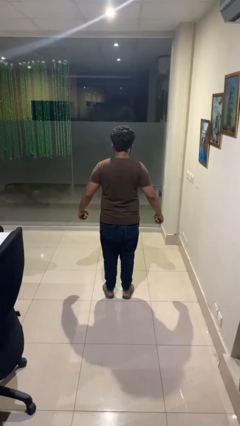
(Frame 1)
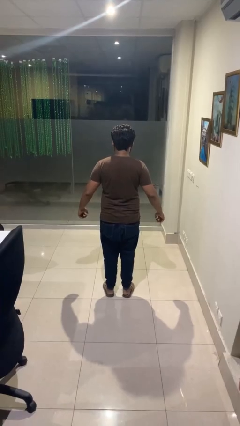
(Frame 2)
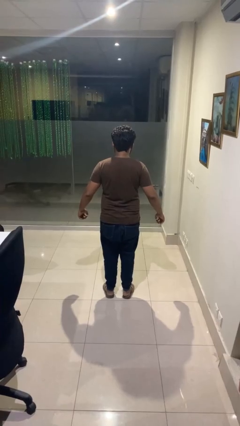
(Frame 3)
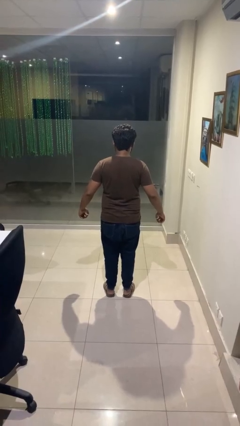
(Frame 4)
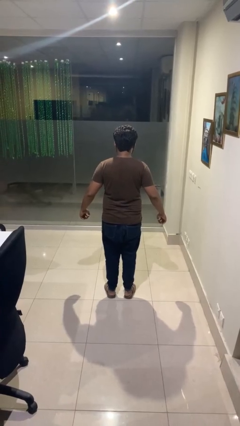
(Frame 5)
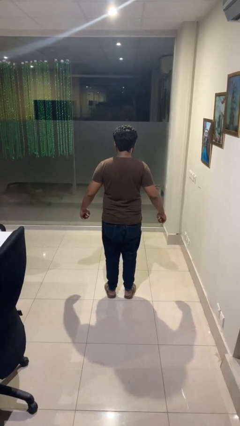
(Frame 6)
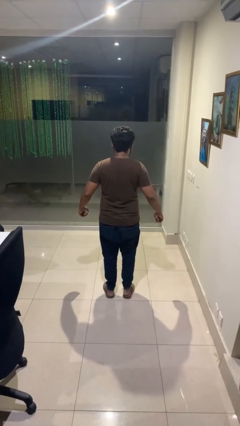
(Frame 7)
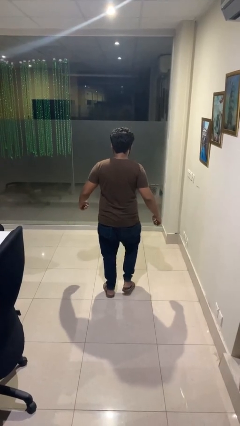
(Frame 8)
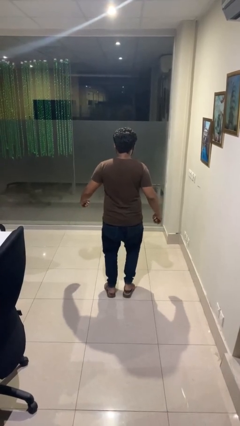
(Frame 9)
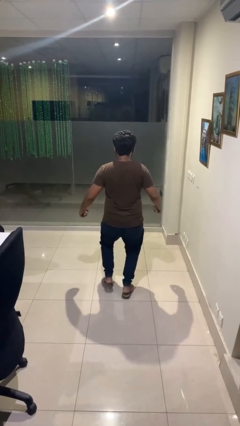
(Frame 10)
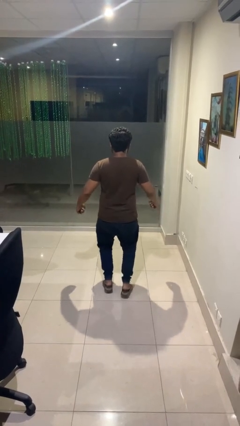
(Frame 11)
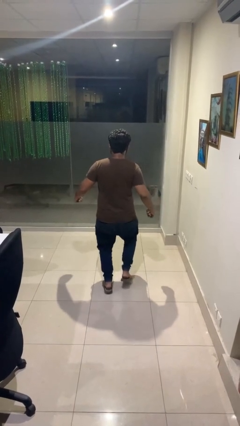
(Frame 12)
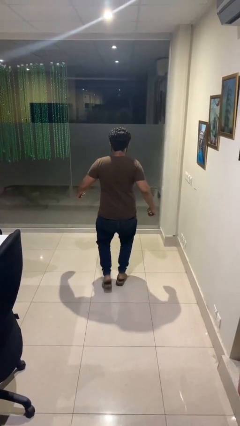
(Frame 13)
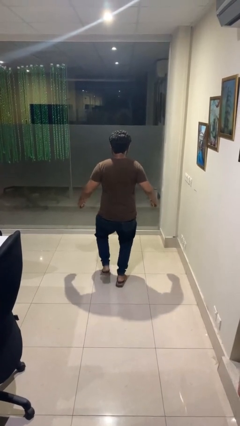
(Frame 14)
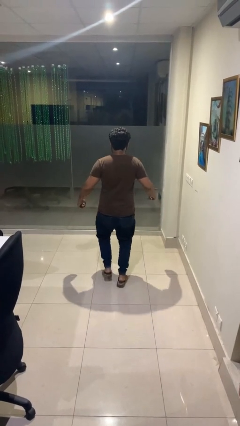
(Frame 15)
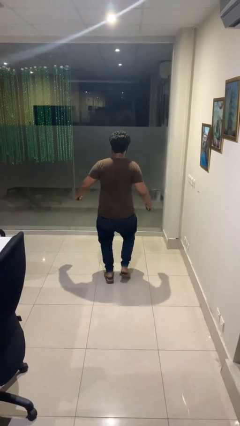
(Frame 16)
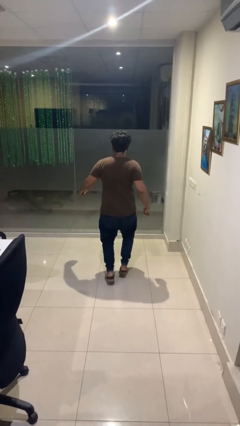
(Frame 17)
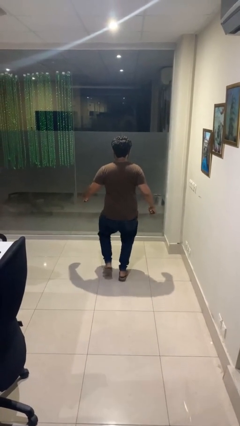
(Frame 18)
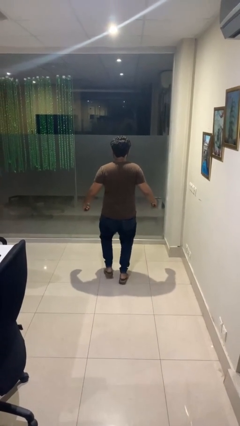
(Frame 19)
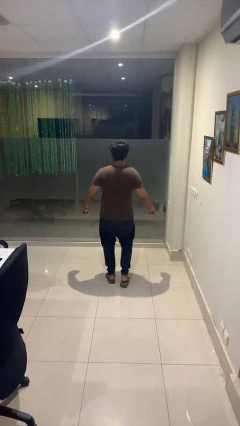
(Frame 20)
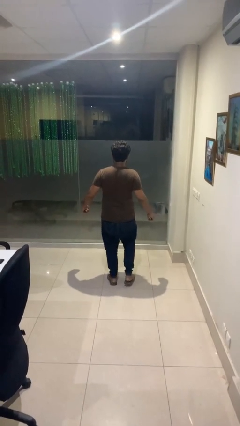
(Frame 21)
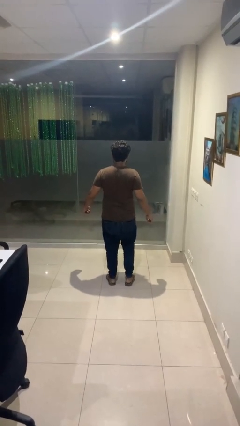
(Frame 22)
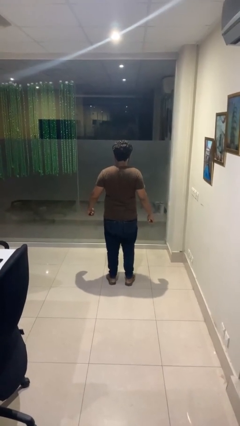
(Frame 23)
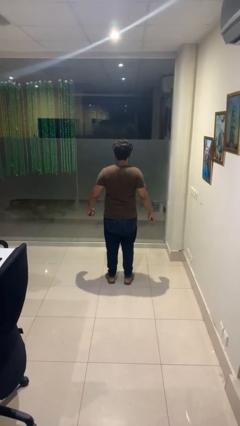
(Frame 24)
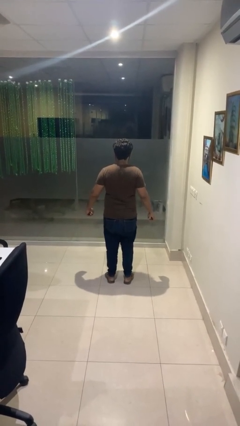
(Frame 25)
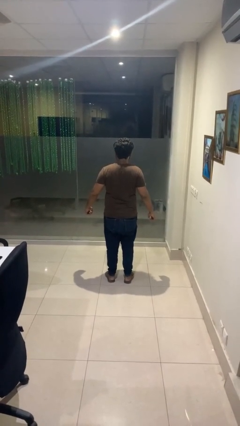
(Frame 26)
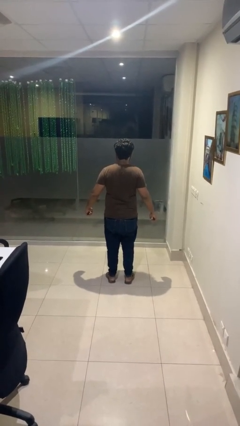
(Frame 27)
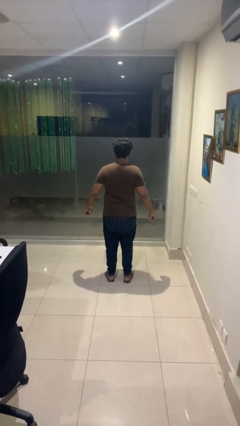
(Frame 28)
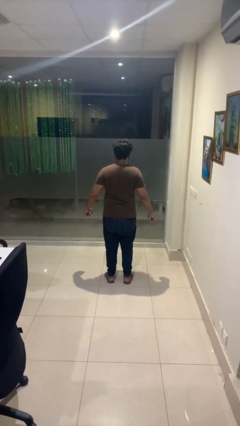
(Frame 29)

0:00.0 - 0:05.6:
person walks tiptoe

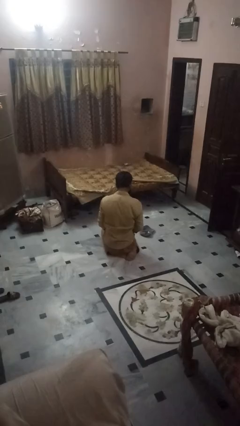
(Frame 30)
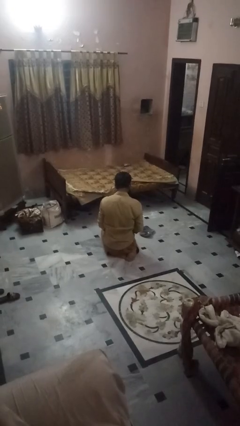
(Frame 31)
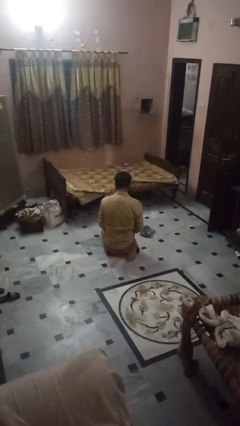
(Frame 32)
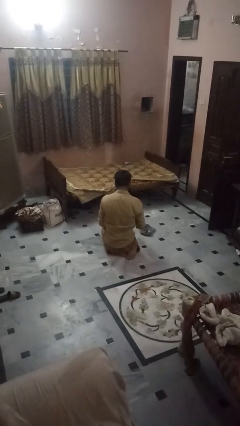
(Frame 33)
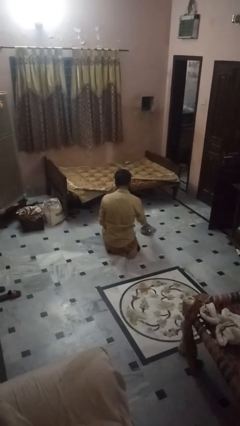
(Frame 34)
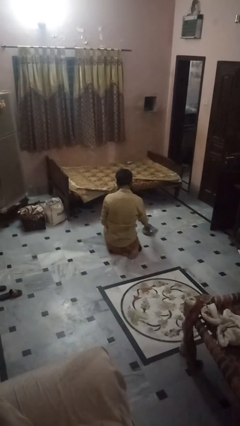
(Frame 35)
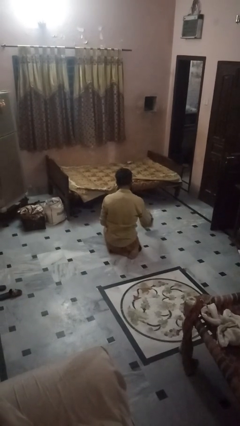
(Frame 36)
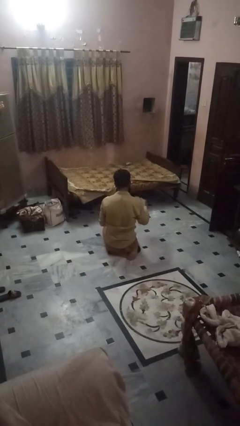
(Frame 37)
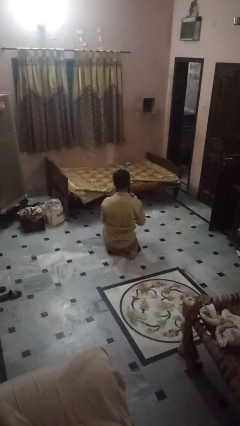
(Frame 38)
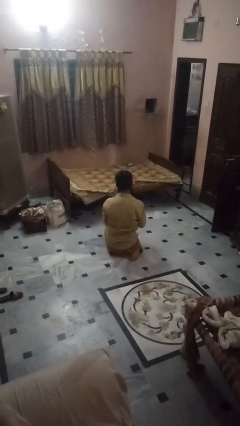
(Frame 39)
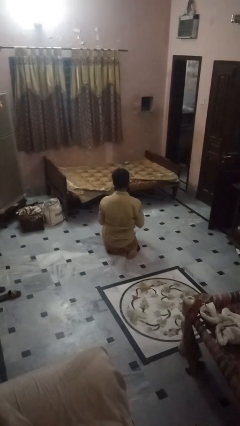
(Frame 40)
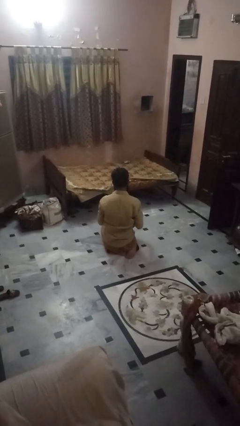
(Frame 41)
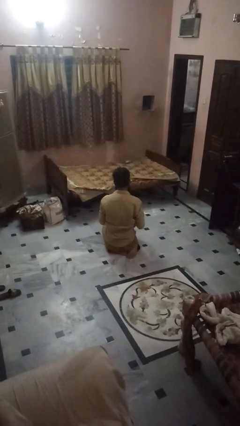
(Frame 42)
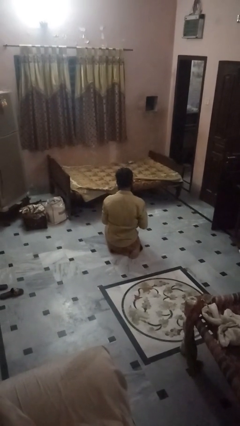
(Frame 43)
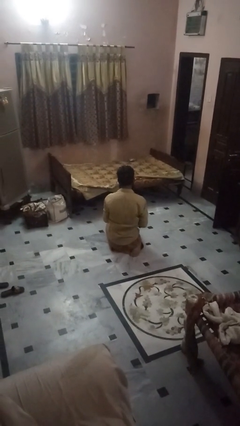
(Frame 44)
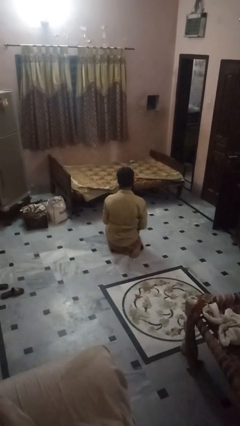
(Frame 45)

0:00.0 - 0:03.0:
person picks up object from floor

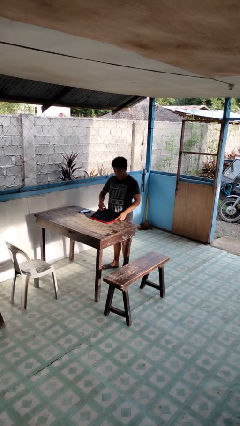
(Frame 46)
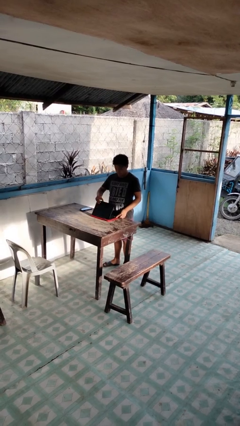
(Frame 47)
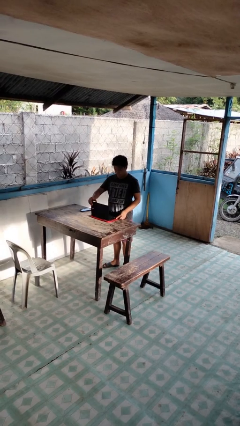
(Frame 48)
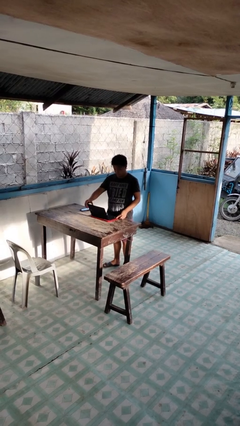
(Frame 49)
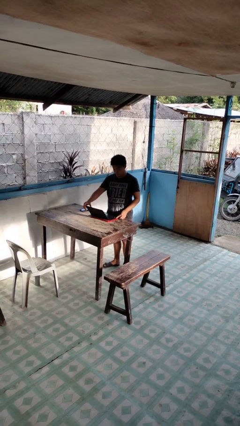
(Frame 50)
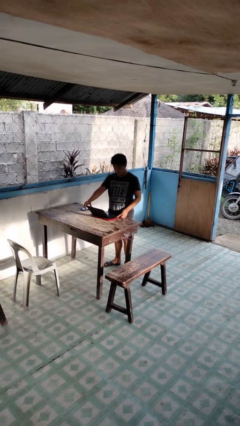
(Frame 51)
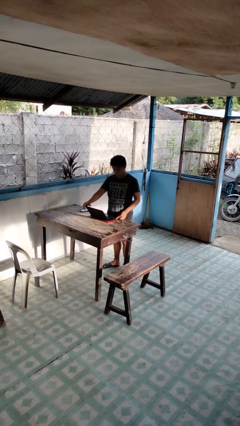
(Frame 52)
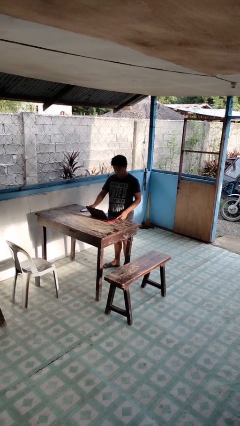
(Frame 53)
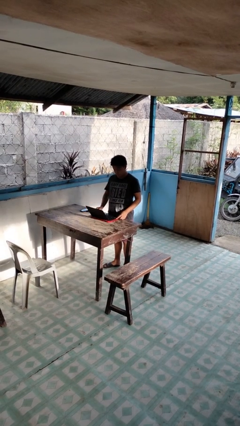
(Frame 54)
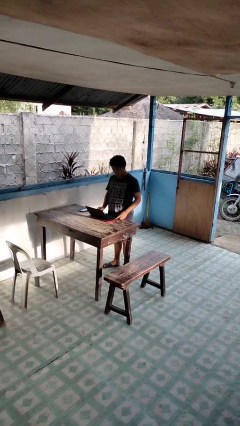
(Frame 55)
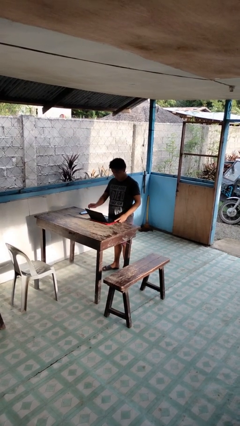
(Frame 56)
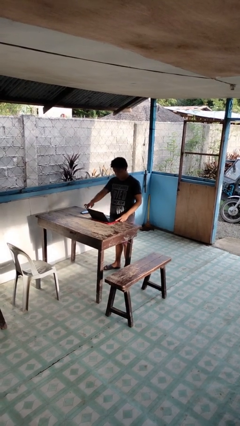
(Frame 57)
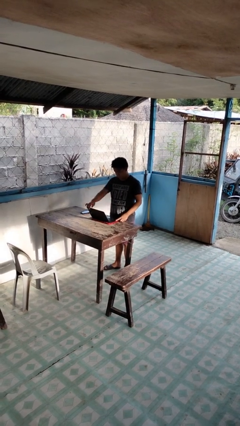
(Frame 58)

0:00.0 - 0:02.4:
person opens laptop

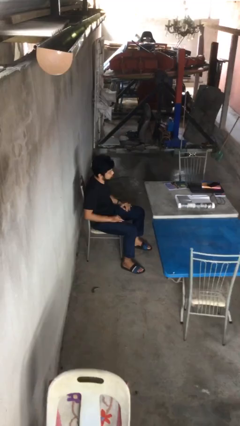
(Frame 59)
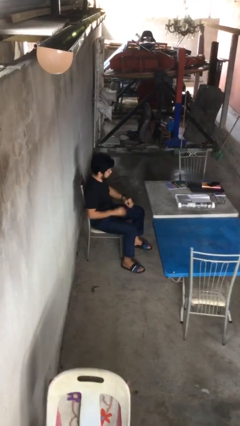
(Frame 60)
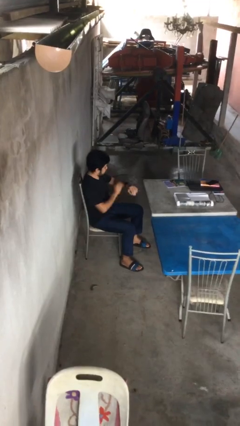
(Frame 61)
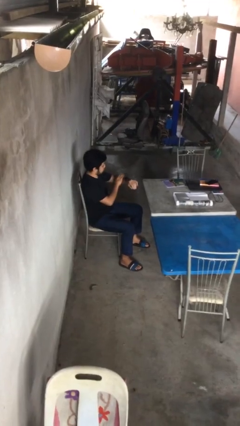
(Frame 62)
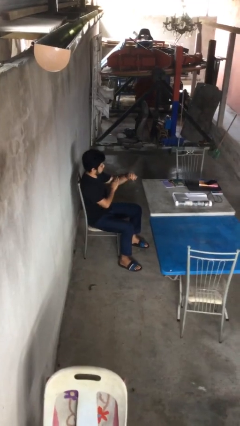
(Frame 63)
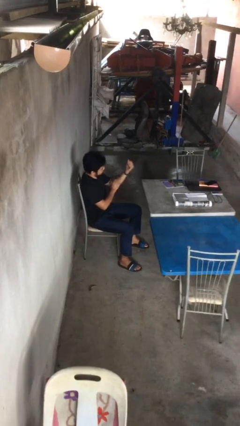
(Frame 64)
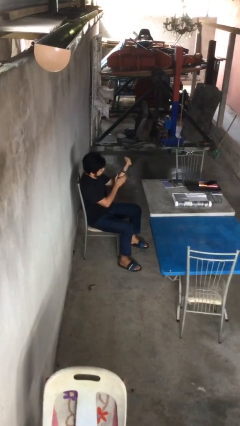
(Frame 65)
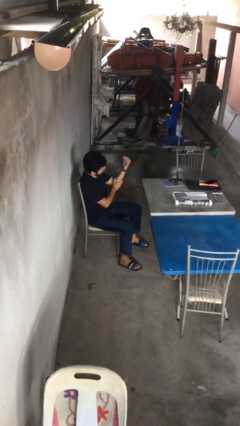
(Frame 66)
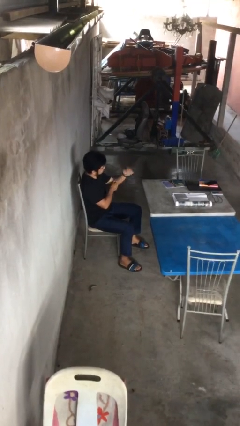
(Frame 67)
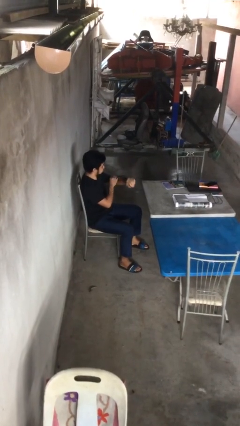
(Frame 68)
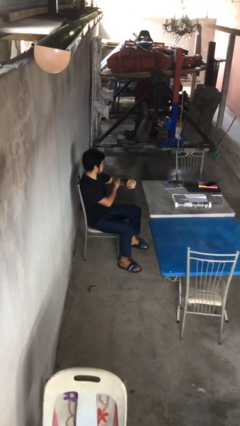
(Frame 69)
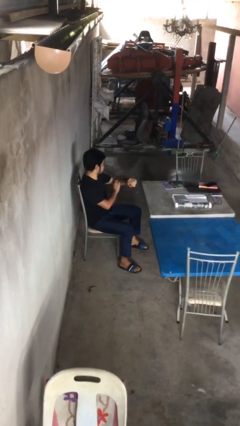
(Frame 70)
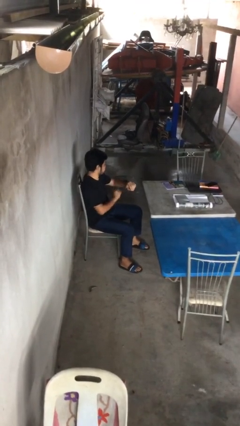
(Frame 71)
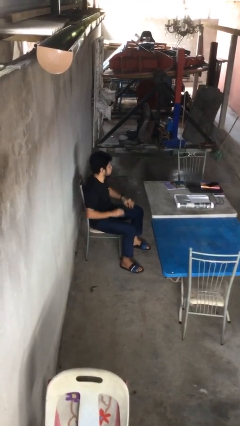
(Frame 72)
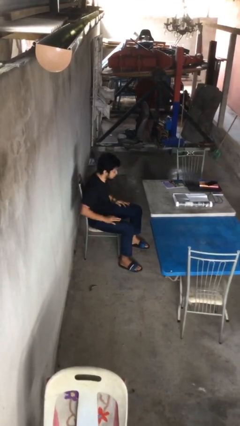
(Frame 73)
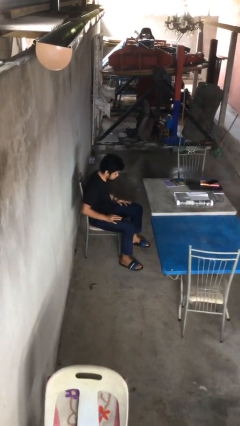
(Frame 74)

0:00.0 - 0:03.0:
person looks at hands in lap

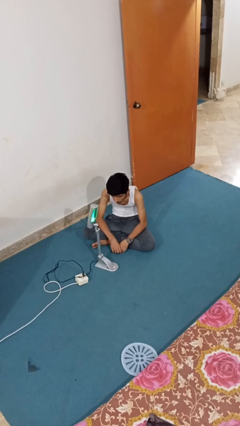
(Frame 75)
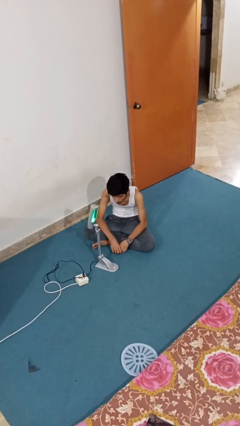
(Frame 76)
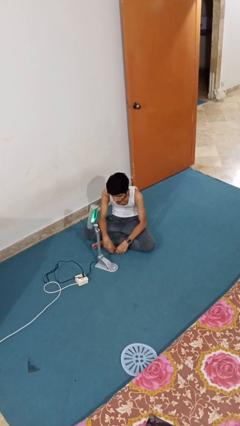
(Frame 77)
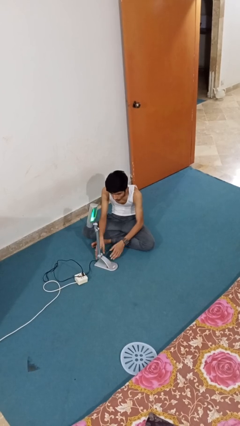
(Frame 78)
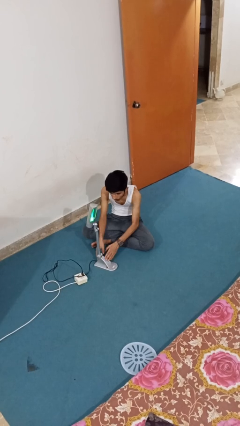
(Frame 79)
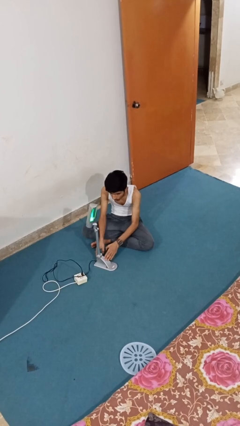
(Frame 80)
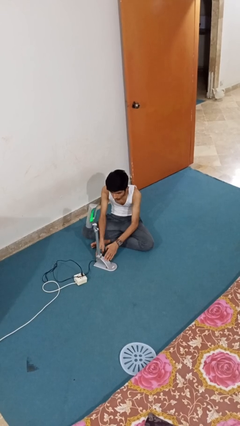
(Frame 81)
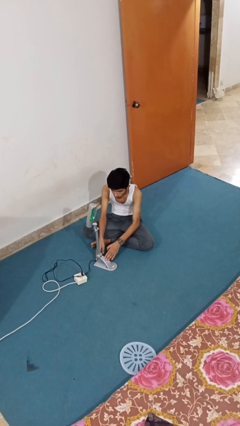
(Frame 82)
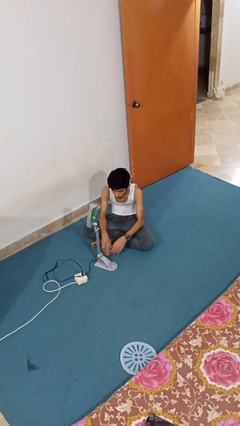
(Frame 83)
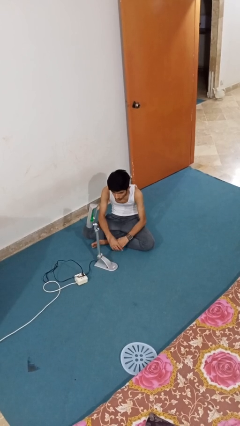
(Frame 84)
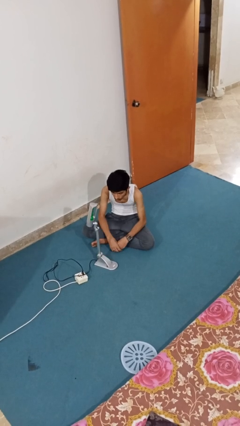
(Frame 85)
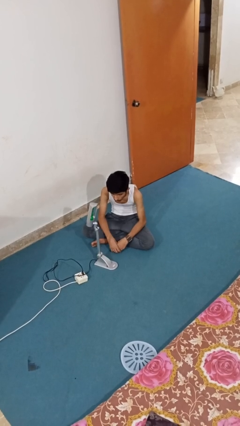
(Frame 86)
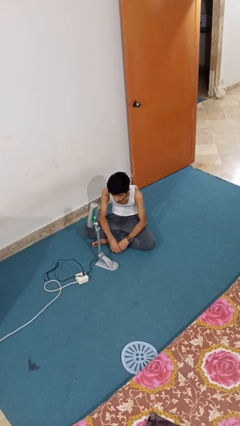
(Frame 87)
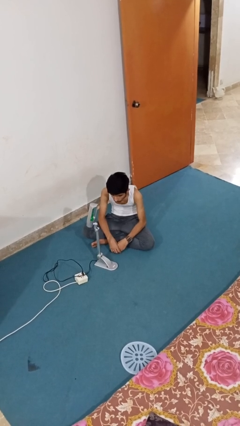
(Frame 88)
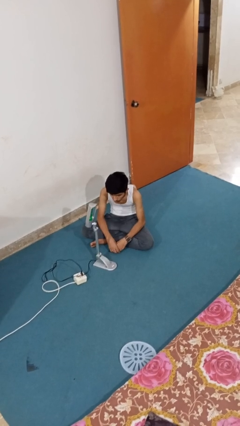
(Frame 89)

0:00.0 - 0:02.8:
person turns off lamp

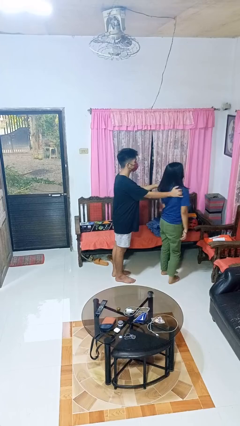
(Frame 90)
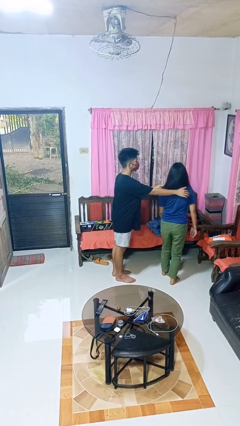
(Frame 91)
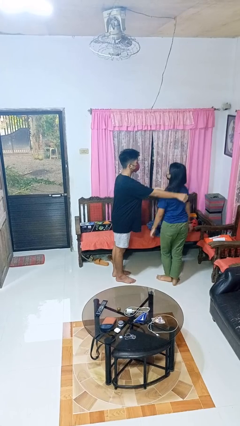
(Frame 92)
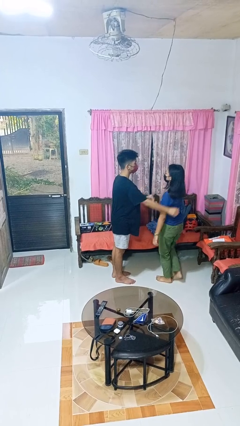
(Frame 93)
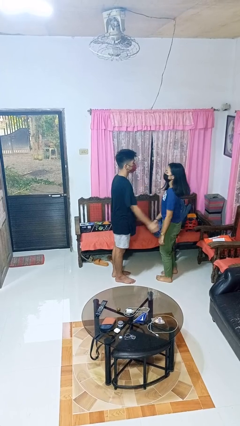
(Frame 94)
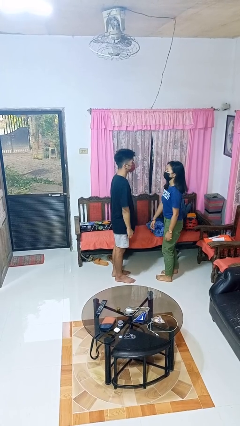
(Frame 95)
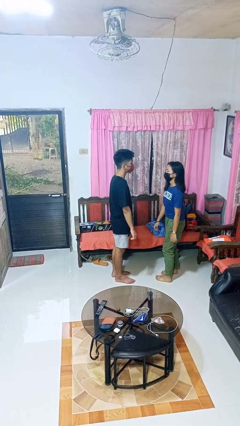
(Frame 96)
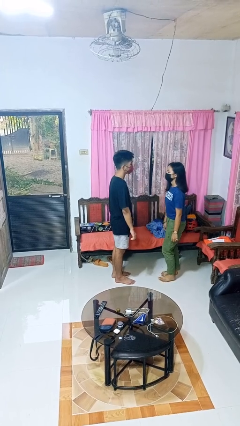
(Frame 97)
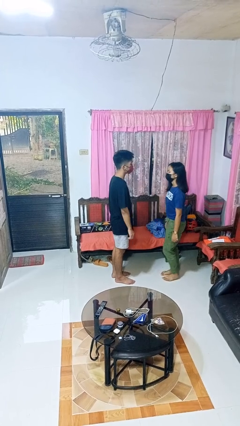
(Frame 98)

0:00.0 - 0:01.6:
person spins person around
